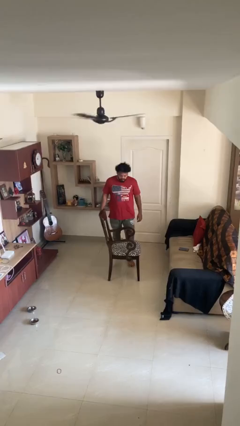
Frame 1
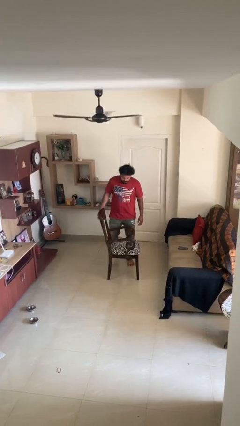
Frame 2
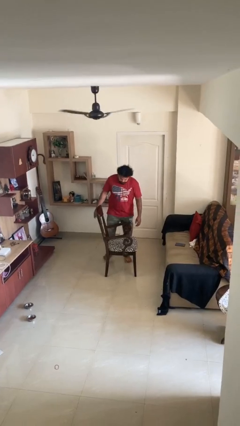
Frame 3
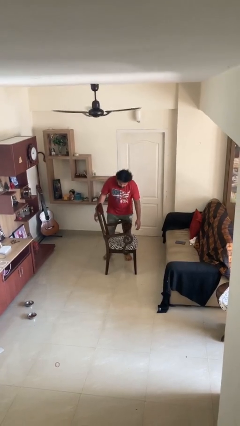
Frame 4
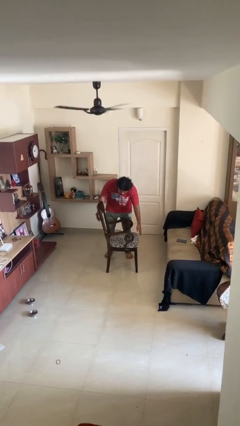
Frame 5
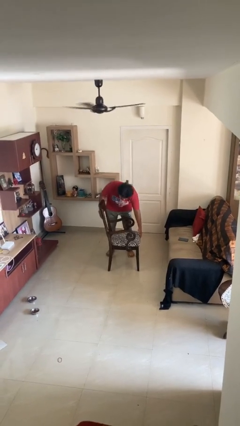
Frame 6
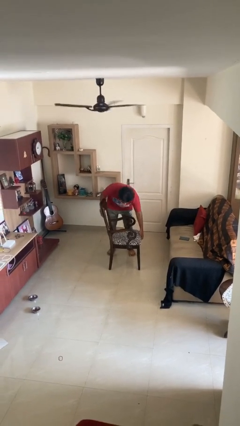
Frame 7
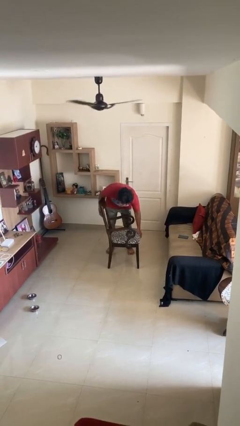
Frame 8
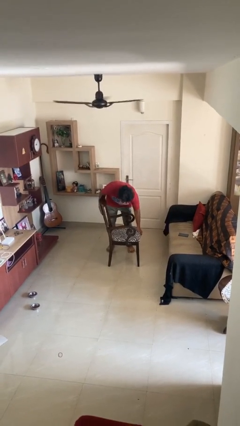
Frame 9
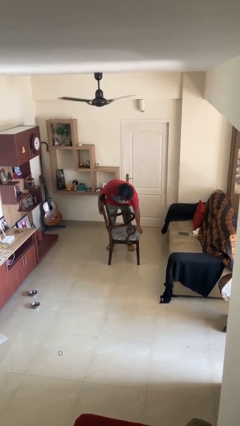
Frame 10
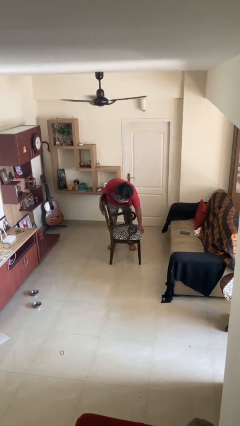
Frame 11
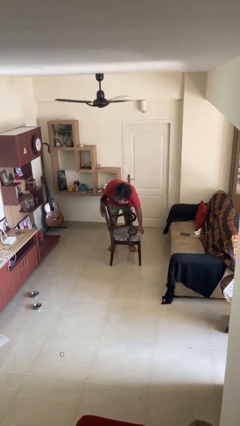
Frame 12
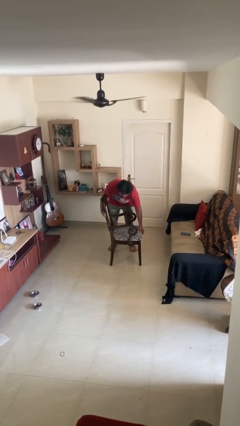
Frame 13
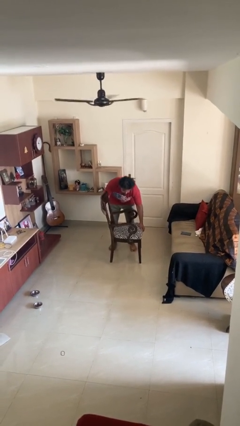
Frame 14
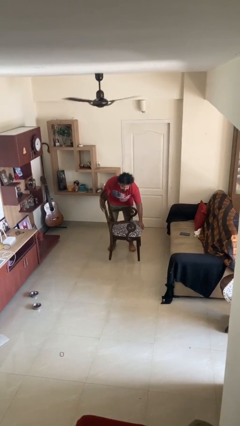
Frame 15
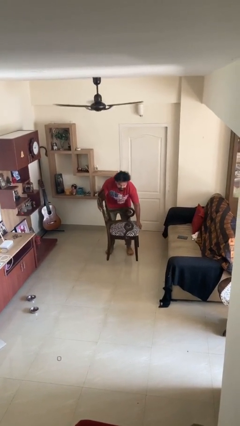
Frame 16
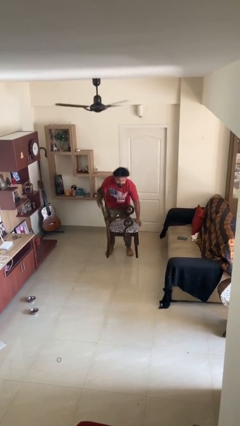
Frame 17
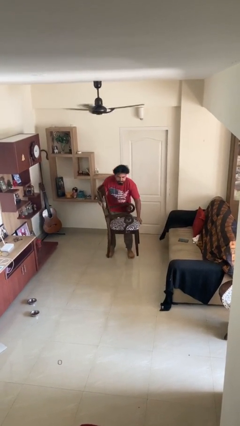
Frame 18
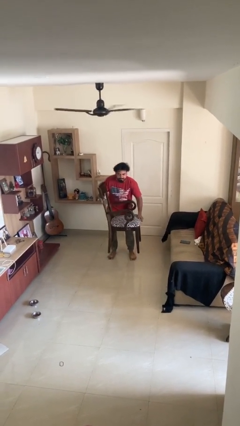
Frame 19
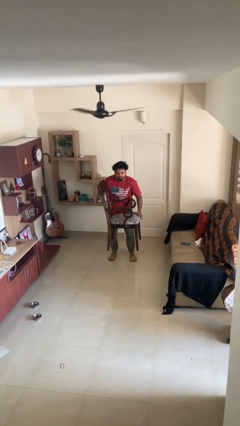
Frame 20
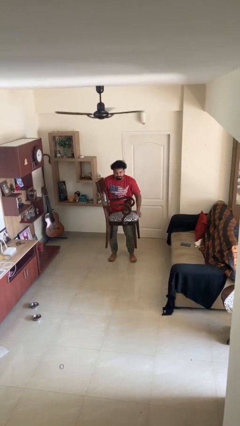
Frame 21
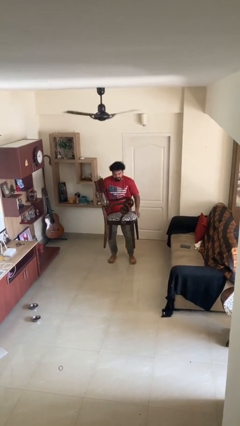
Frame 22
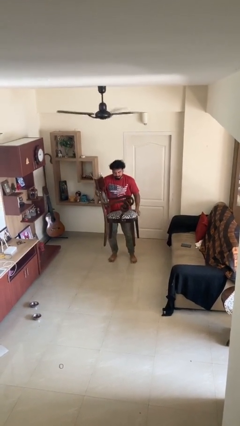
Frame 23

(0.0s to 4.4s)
person picks up object from floor

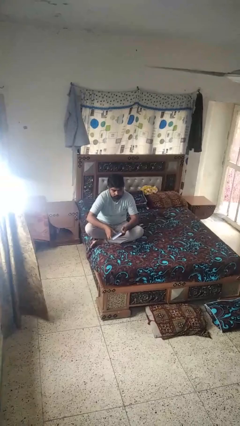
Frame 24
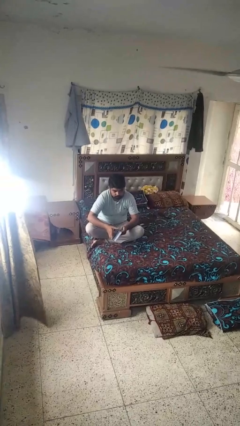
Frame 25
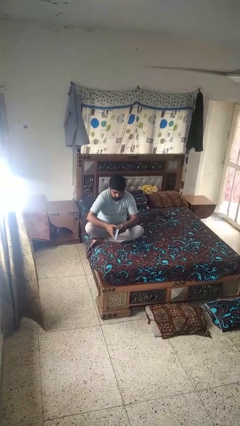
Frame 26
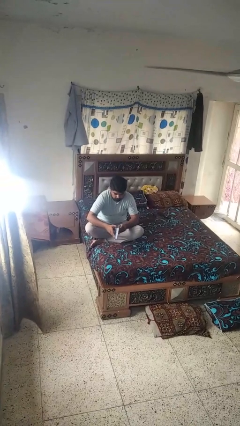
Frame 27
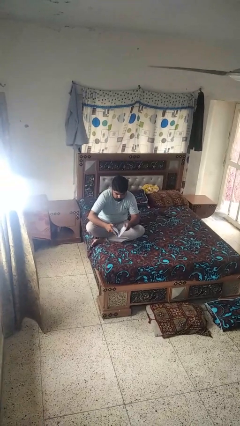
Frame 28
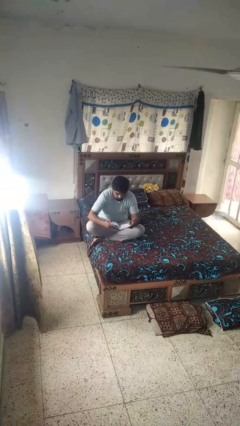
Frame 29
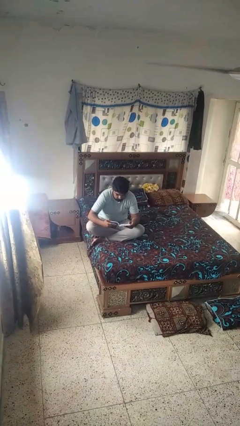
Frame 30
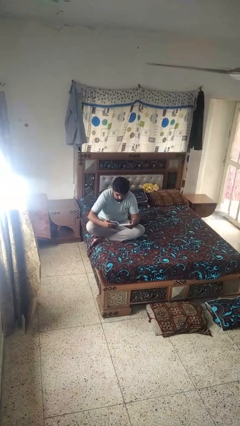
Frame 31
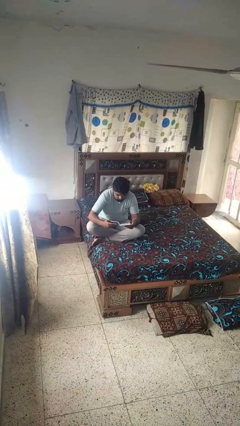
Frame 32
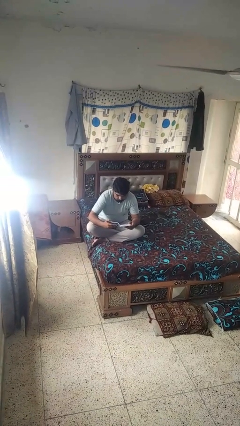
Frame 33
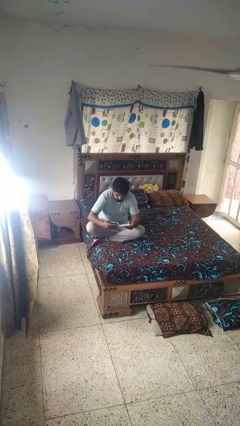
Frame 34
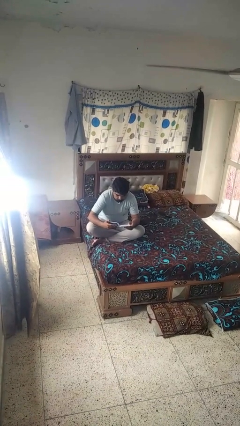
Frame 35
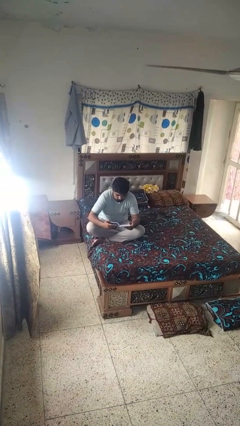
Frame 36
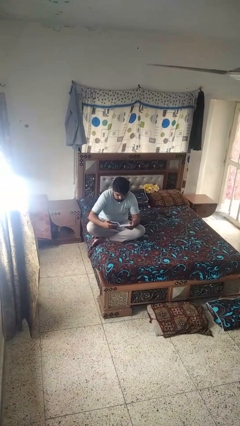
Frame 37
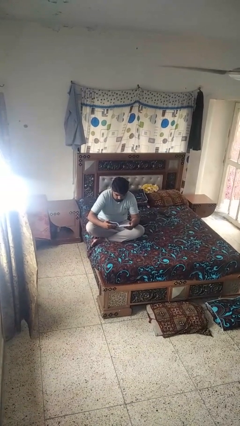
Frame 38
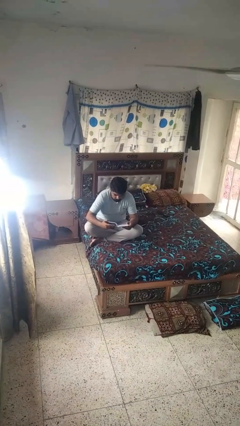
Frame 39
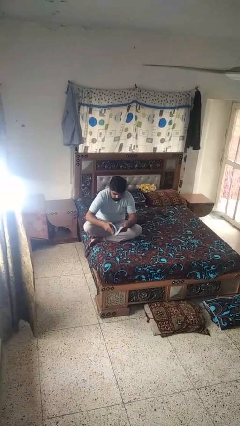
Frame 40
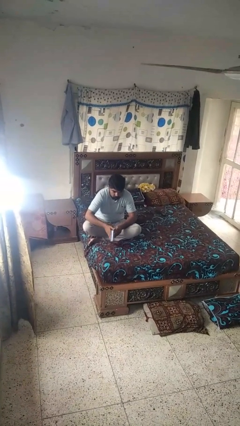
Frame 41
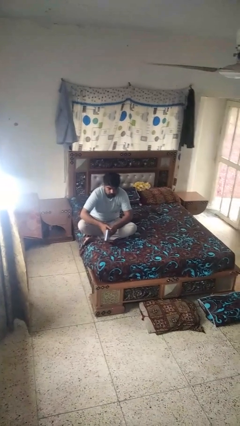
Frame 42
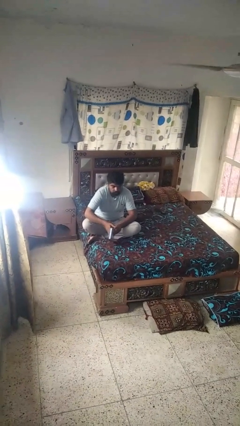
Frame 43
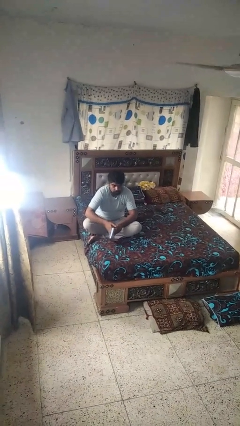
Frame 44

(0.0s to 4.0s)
person reads book

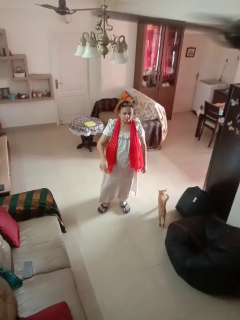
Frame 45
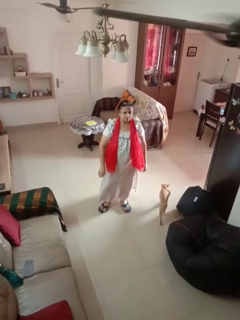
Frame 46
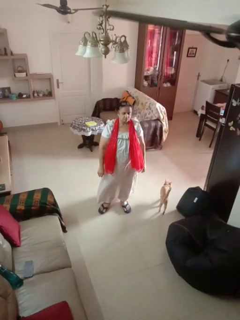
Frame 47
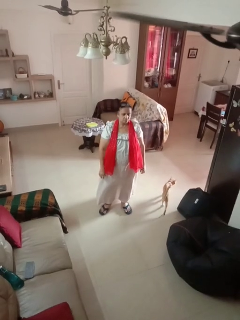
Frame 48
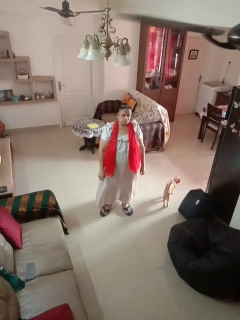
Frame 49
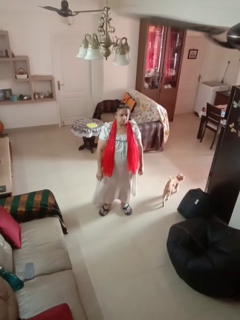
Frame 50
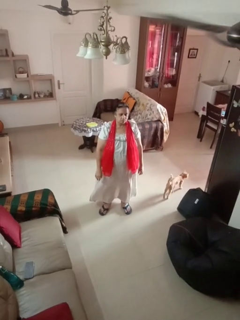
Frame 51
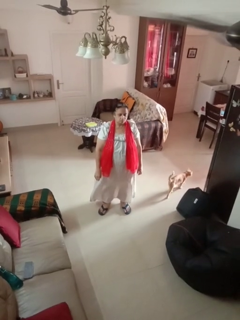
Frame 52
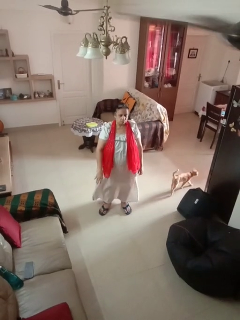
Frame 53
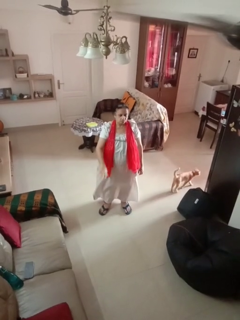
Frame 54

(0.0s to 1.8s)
person gestures lower hand

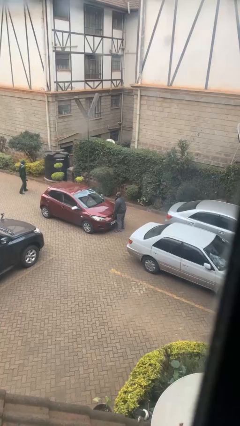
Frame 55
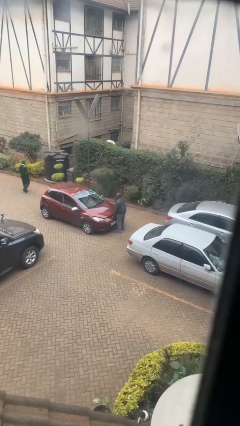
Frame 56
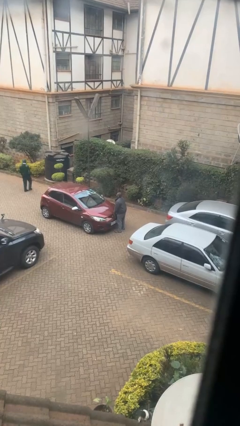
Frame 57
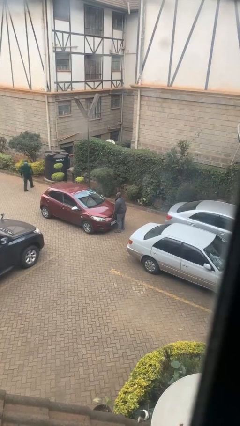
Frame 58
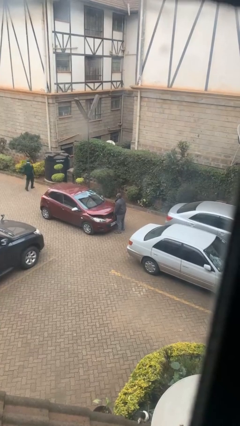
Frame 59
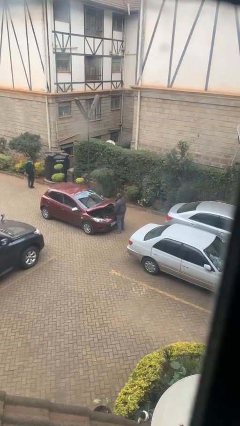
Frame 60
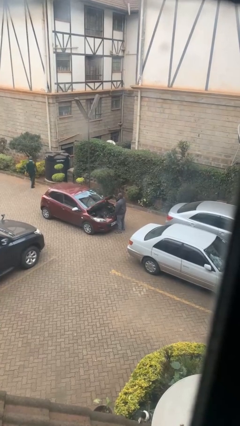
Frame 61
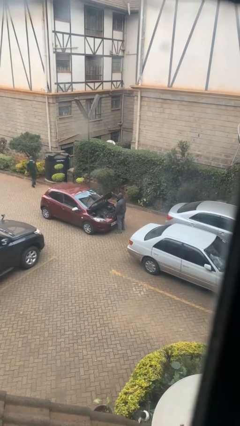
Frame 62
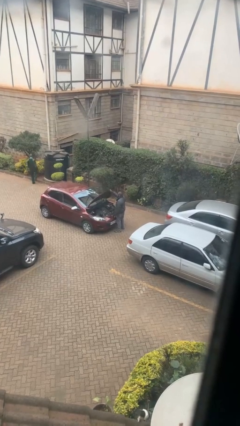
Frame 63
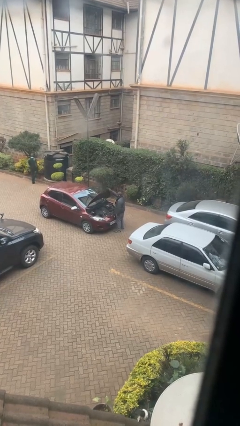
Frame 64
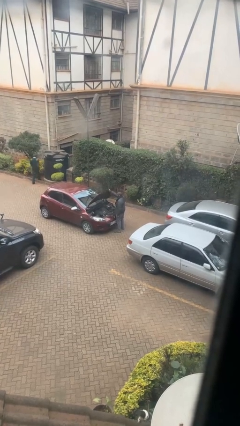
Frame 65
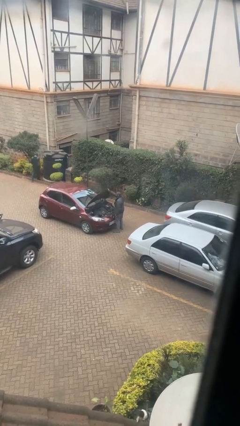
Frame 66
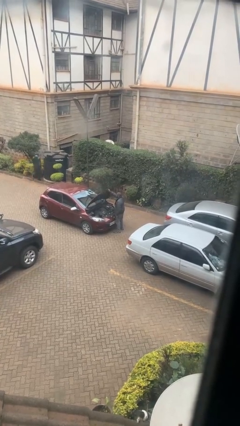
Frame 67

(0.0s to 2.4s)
person opens car hood

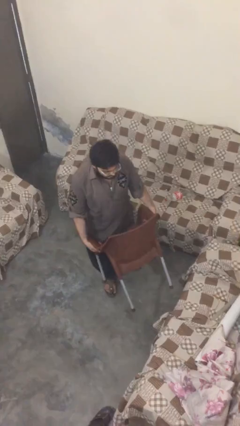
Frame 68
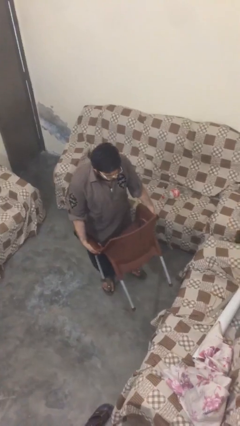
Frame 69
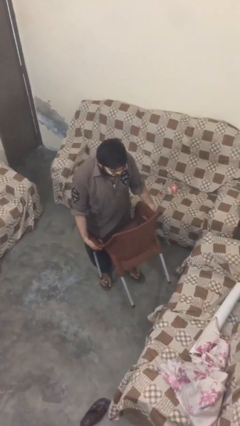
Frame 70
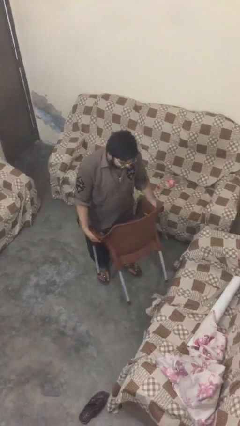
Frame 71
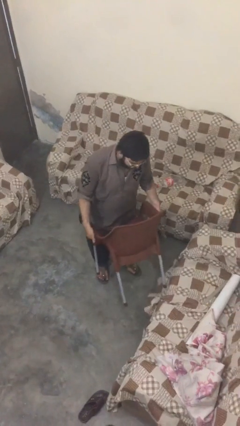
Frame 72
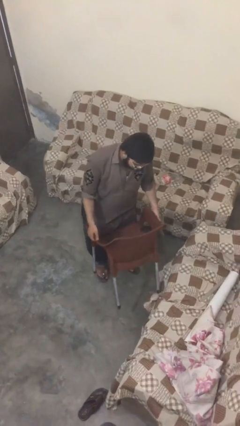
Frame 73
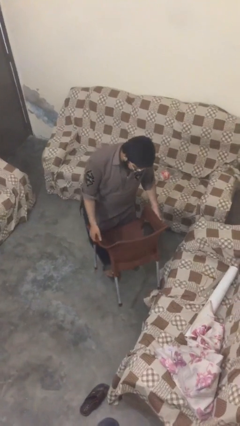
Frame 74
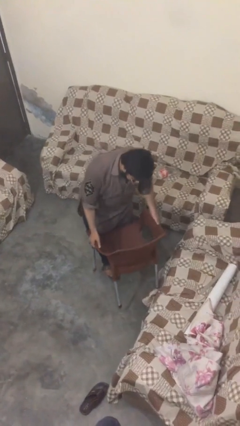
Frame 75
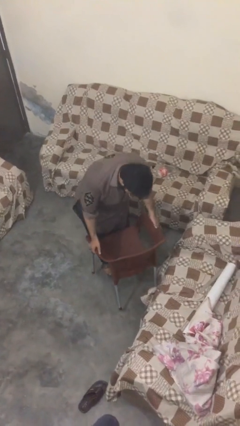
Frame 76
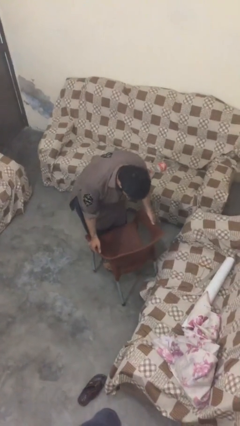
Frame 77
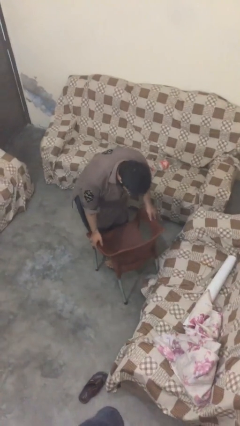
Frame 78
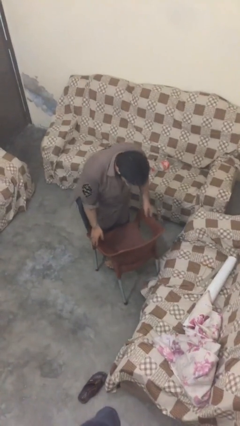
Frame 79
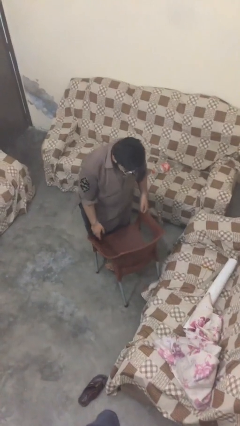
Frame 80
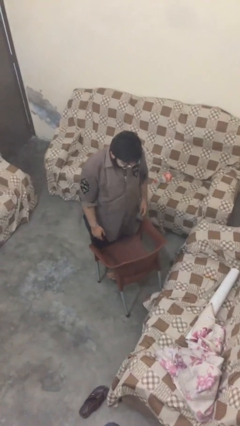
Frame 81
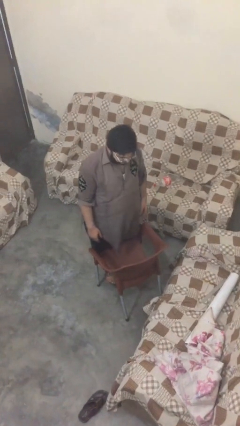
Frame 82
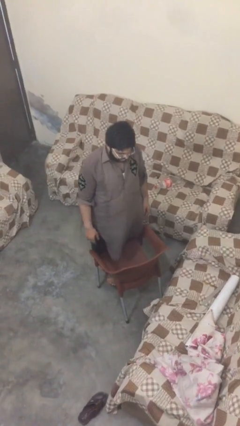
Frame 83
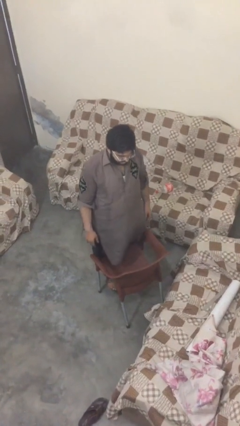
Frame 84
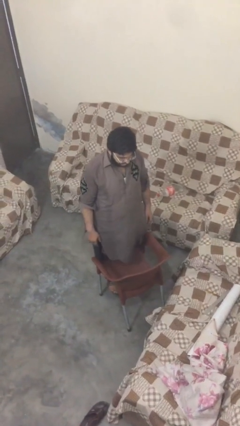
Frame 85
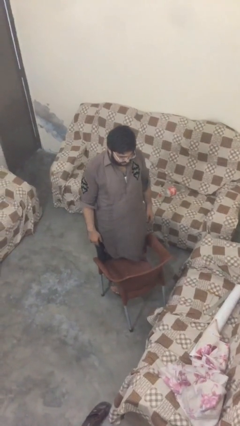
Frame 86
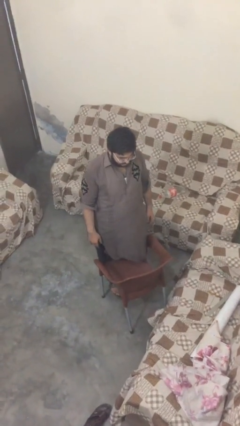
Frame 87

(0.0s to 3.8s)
person puts down object on floor

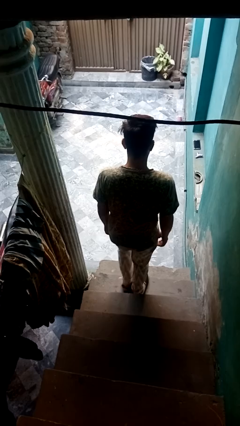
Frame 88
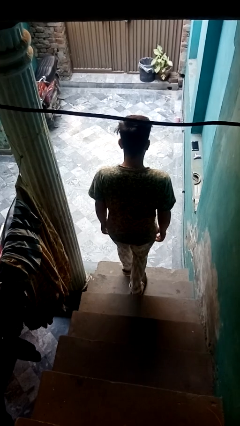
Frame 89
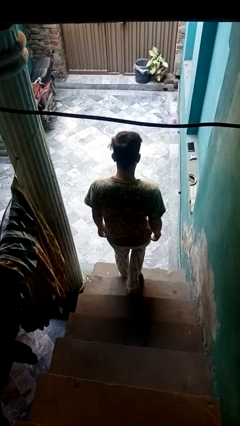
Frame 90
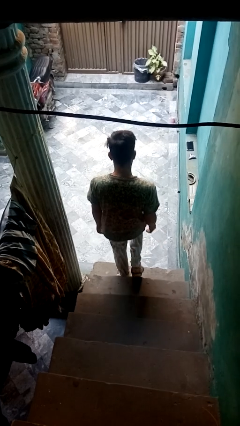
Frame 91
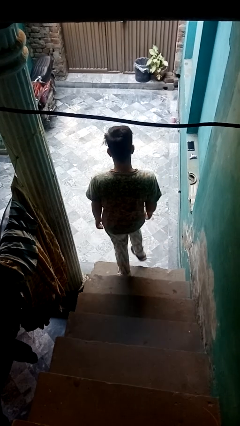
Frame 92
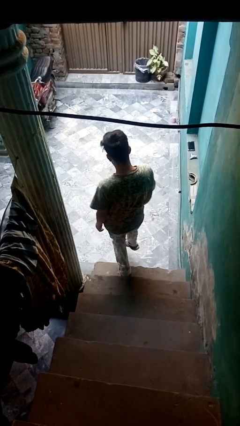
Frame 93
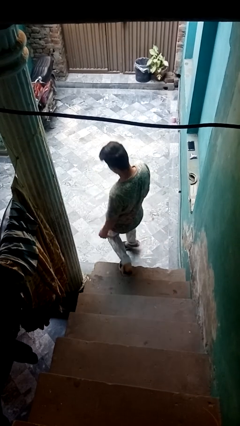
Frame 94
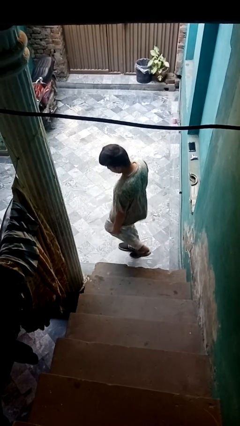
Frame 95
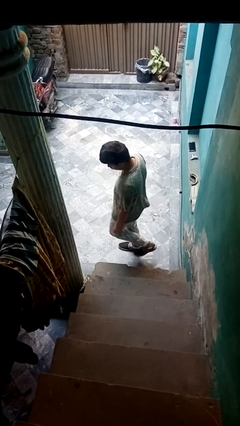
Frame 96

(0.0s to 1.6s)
person climbs down stairs
